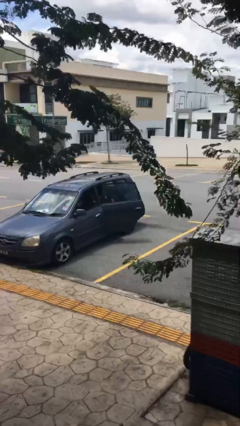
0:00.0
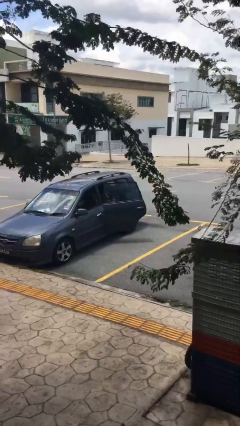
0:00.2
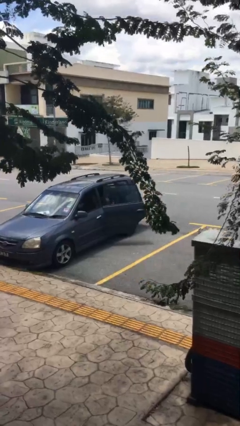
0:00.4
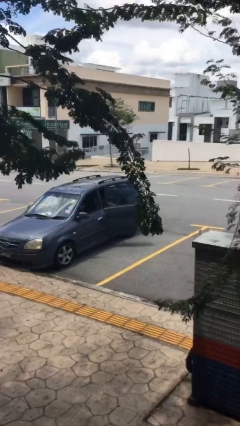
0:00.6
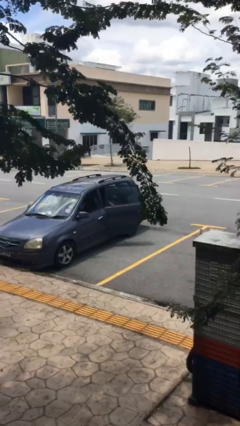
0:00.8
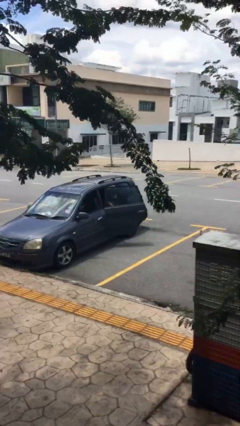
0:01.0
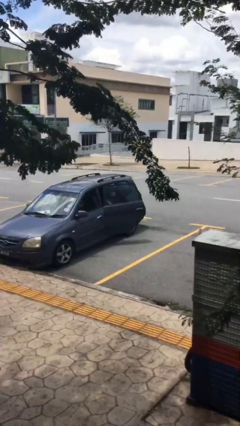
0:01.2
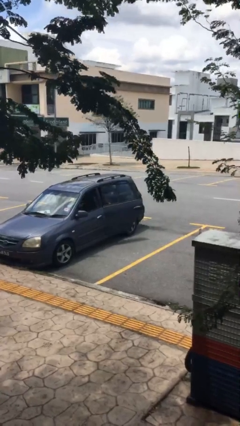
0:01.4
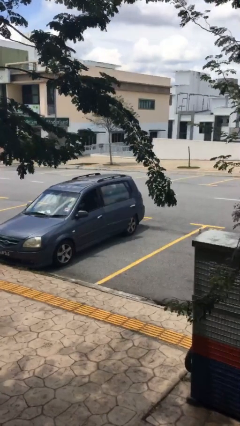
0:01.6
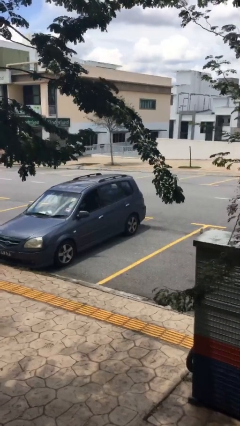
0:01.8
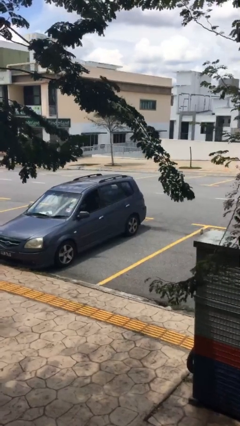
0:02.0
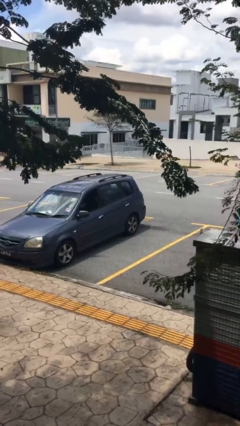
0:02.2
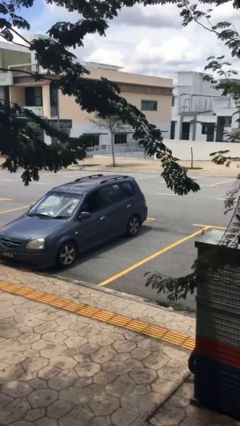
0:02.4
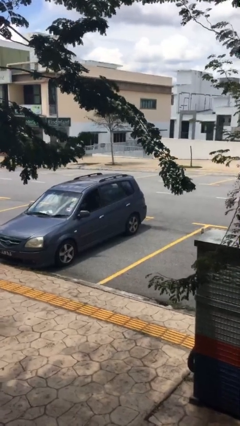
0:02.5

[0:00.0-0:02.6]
person closes car door

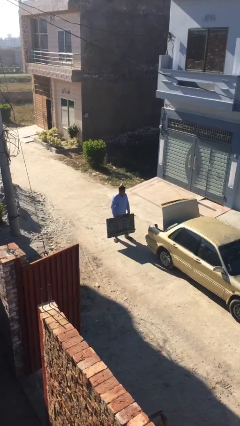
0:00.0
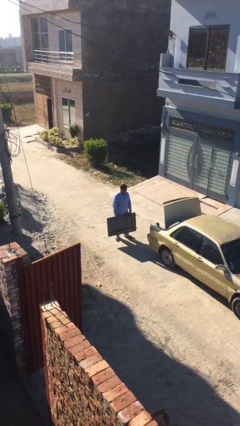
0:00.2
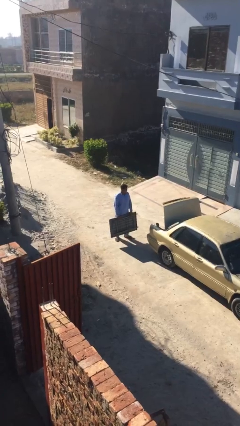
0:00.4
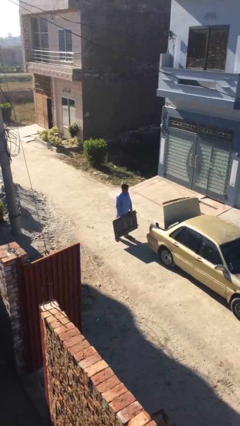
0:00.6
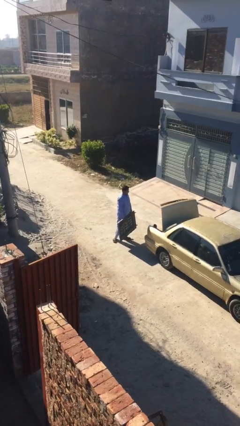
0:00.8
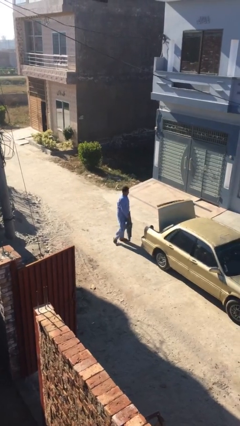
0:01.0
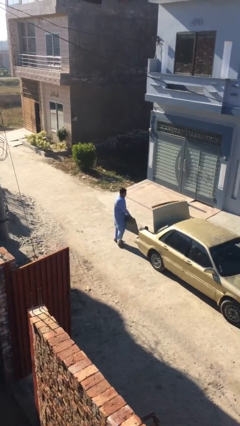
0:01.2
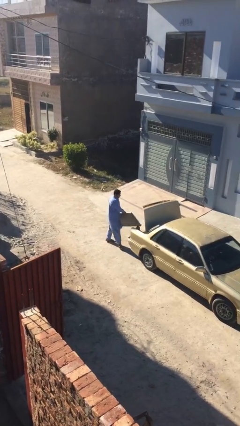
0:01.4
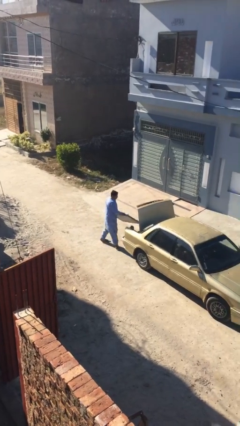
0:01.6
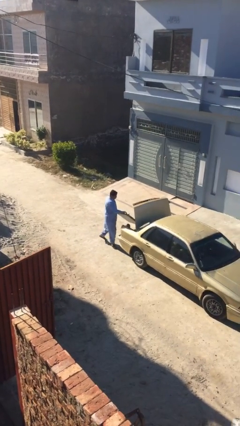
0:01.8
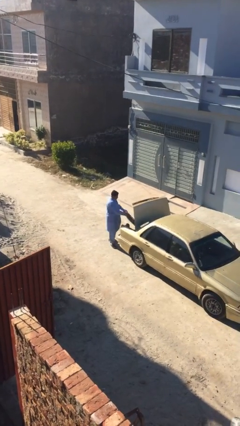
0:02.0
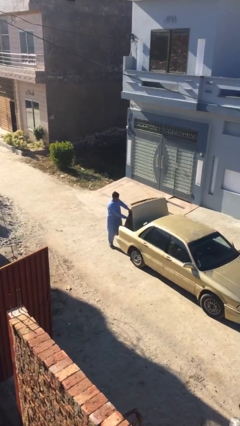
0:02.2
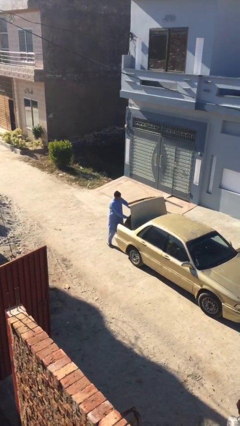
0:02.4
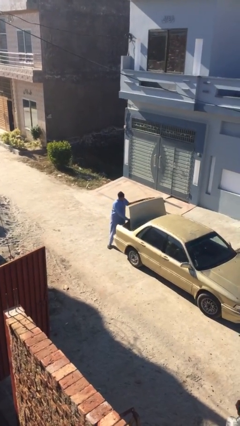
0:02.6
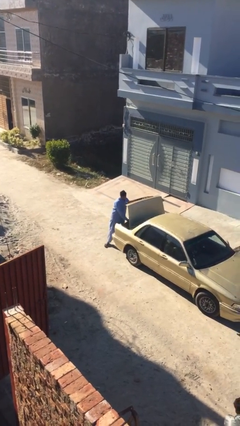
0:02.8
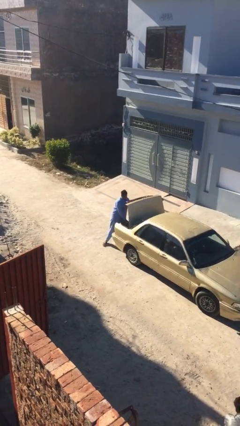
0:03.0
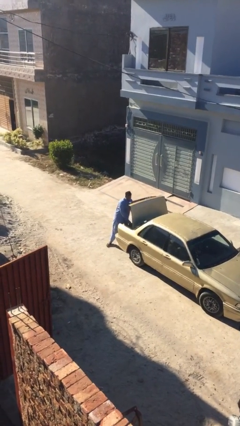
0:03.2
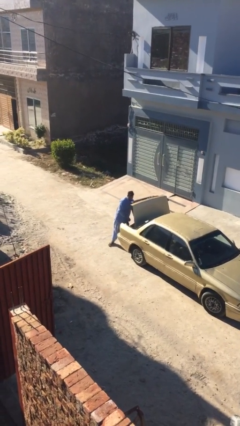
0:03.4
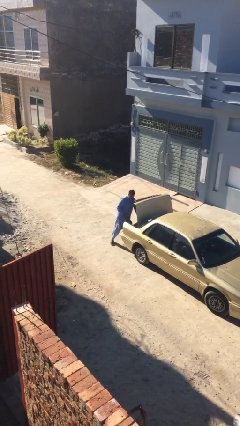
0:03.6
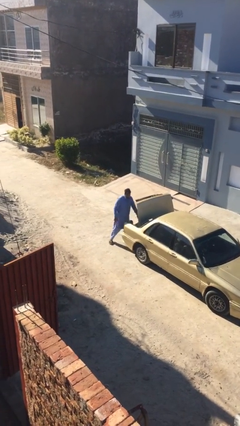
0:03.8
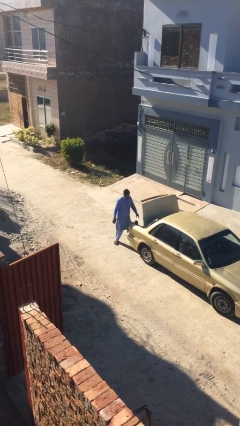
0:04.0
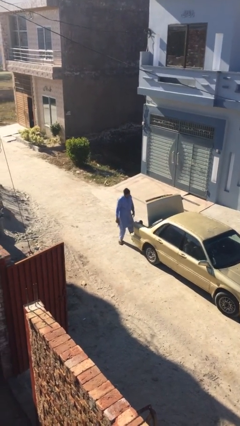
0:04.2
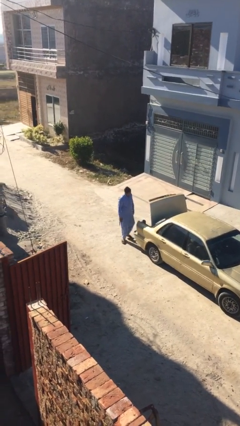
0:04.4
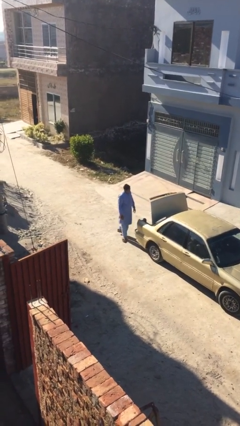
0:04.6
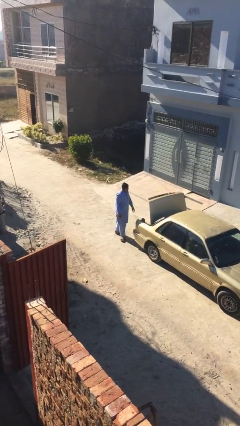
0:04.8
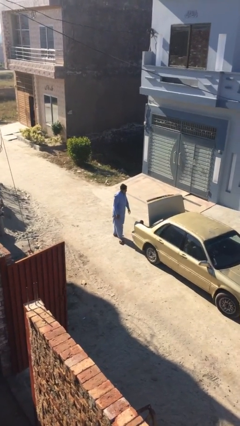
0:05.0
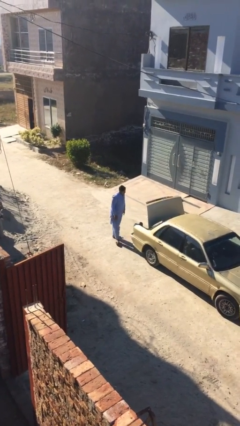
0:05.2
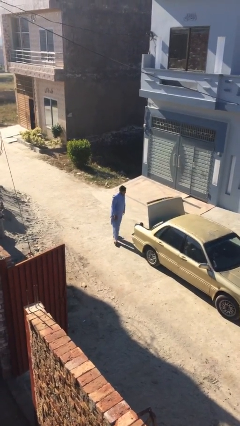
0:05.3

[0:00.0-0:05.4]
person loads car

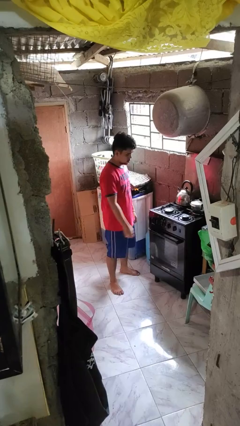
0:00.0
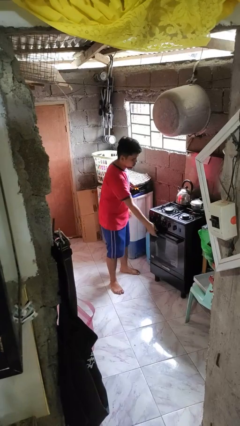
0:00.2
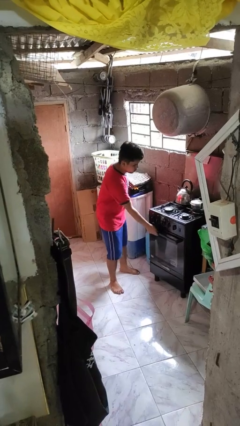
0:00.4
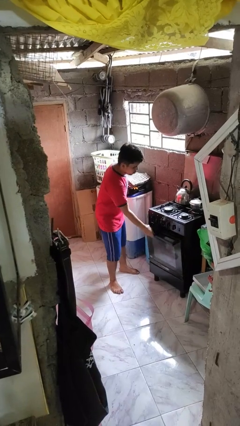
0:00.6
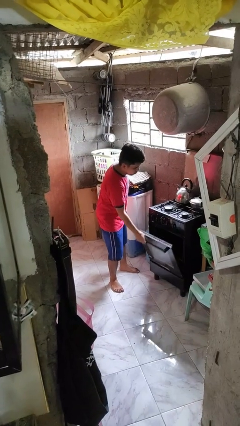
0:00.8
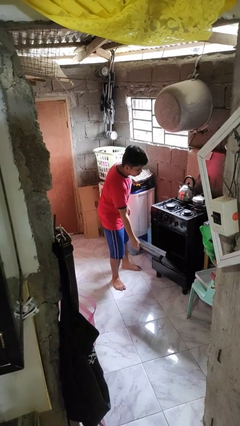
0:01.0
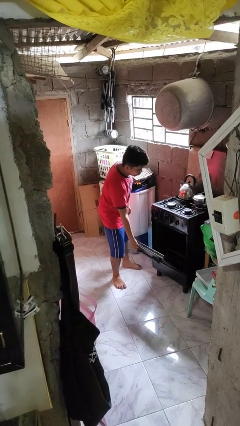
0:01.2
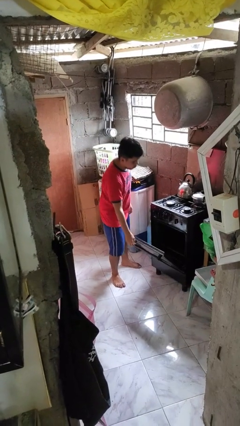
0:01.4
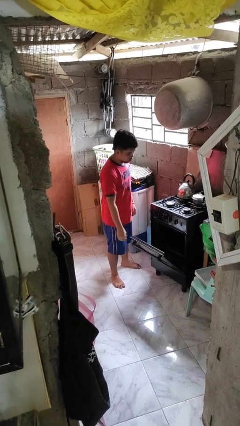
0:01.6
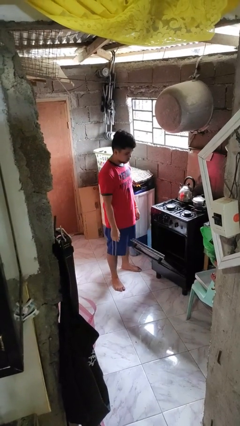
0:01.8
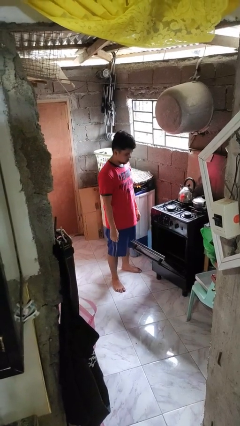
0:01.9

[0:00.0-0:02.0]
person opens oven door

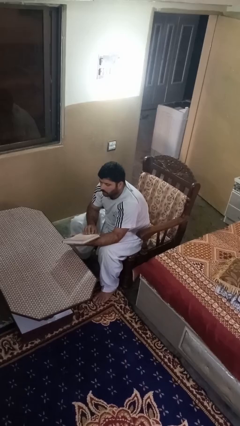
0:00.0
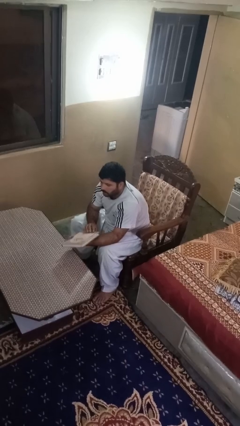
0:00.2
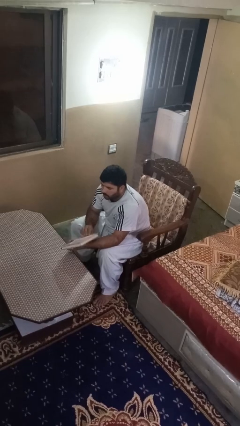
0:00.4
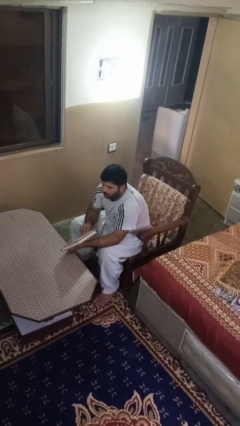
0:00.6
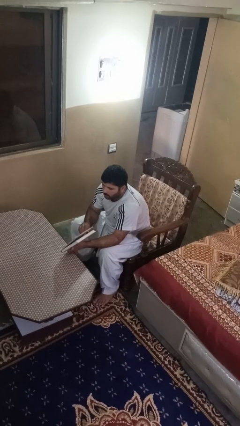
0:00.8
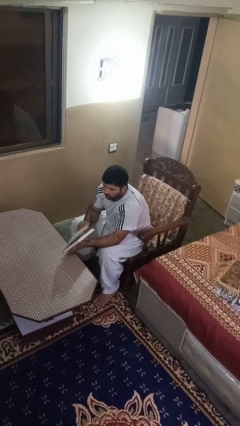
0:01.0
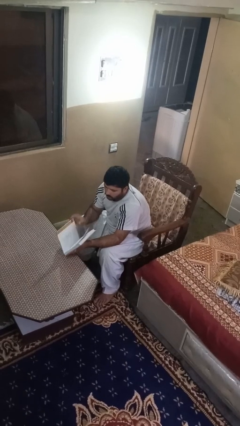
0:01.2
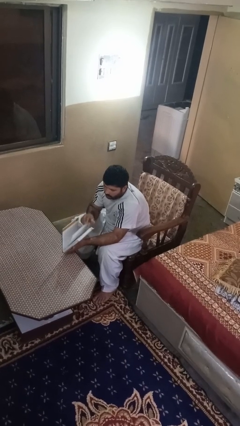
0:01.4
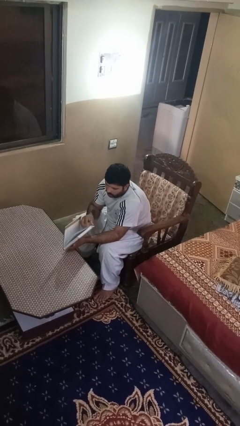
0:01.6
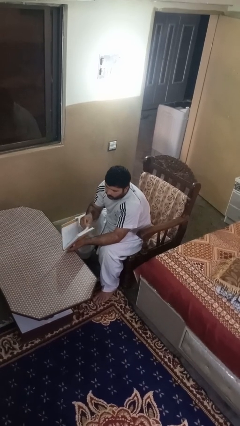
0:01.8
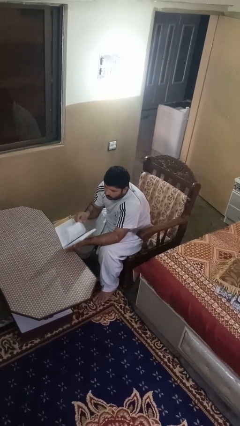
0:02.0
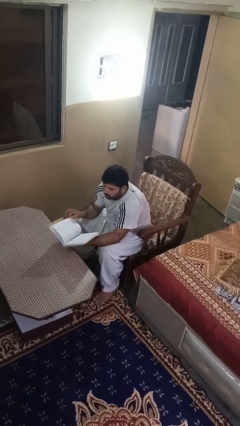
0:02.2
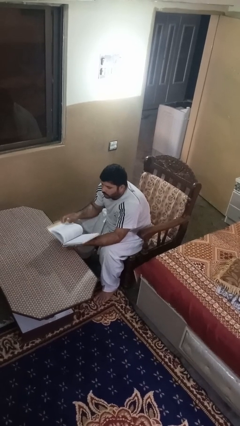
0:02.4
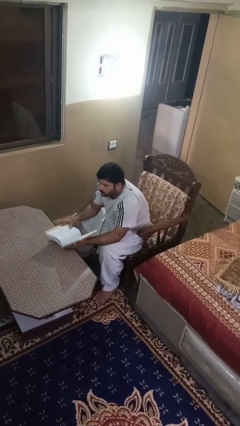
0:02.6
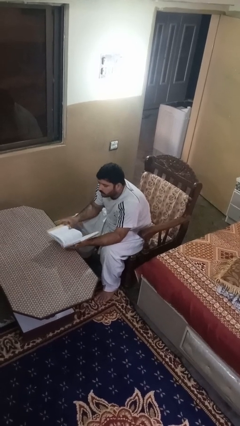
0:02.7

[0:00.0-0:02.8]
person reads book

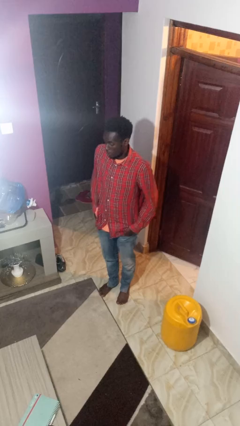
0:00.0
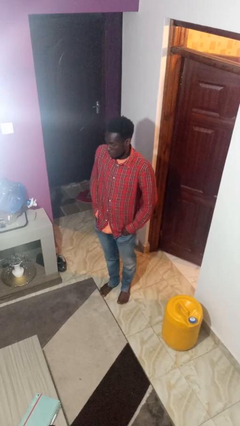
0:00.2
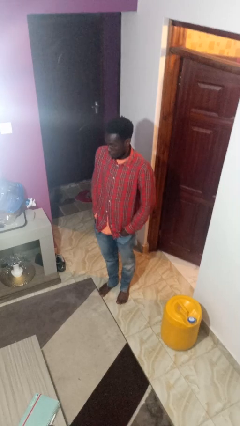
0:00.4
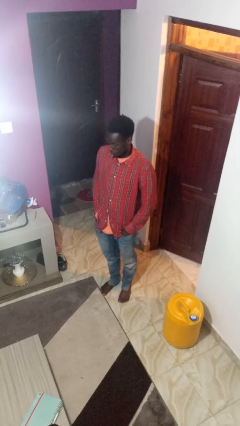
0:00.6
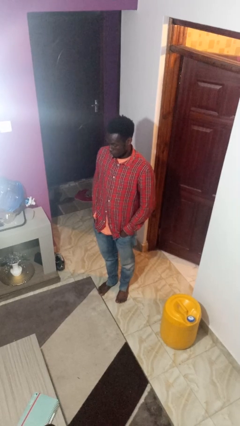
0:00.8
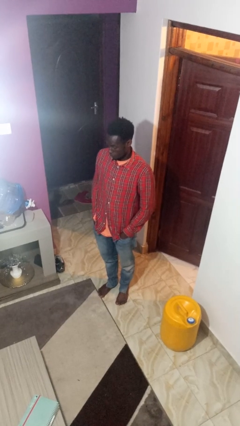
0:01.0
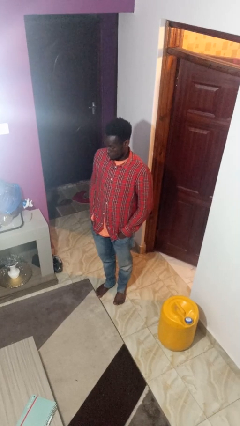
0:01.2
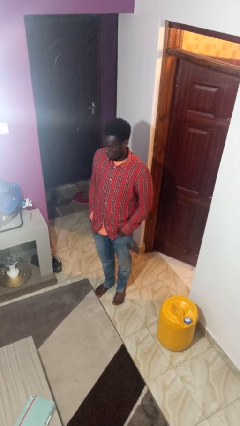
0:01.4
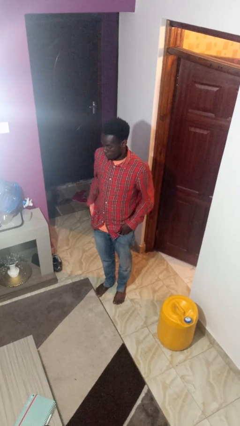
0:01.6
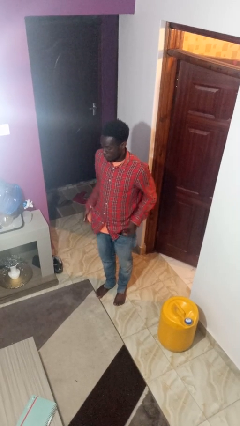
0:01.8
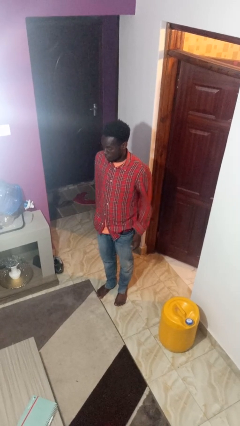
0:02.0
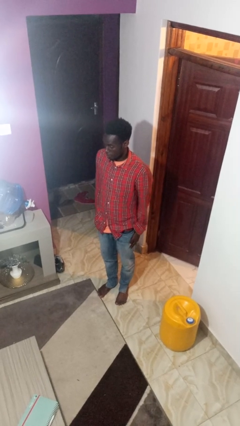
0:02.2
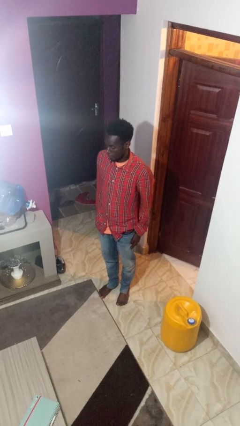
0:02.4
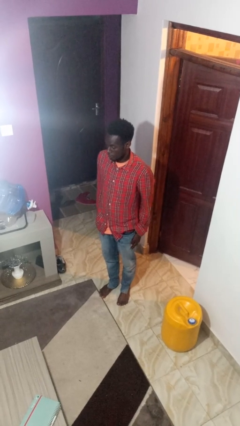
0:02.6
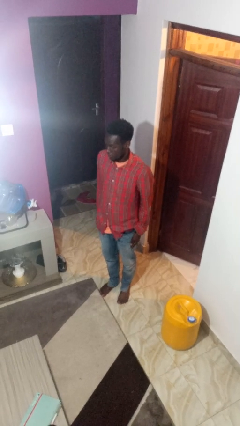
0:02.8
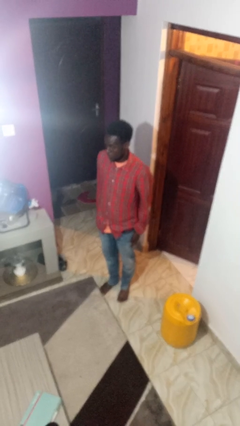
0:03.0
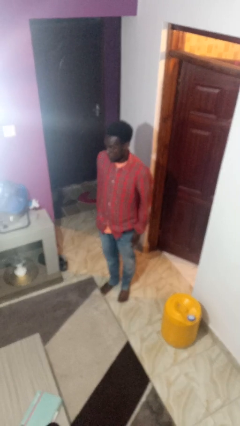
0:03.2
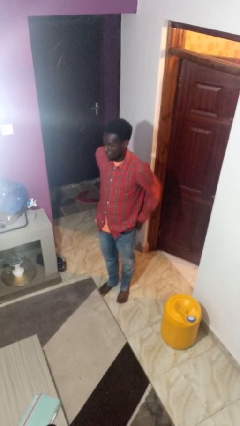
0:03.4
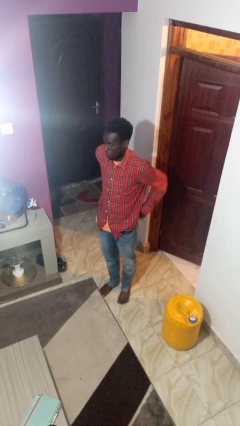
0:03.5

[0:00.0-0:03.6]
person puts hands in back pockets

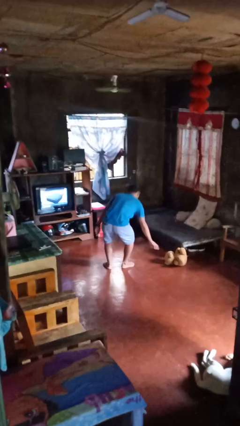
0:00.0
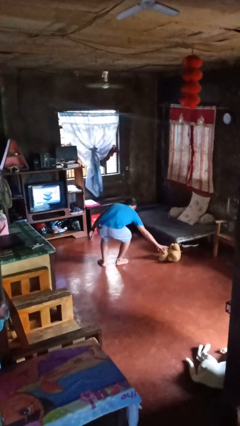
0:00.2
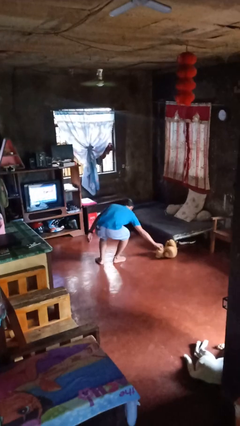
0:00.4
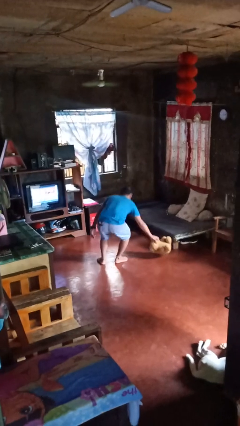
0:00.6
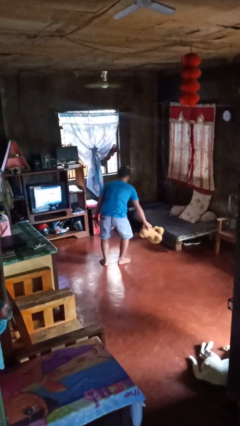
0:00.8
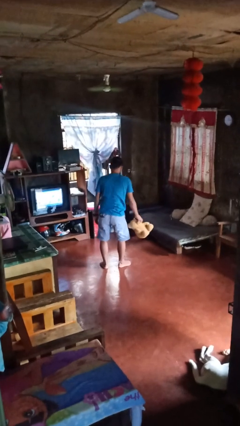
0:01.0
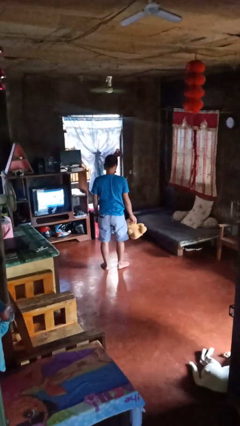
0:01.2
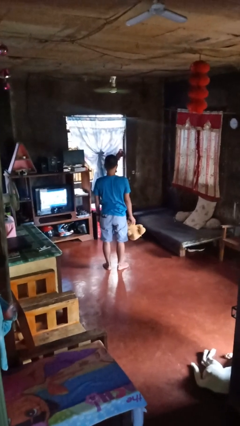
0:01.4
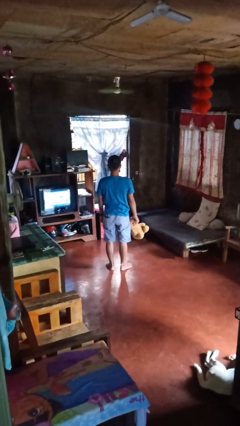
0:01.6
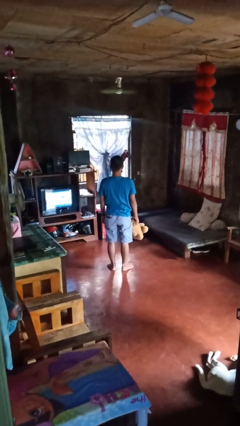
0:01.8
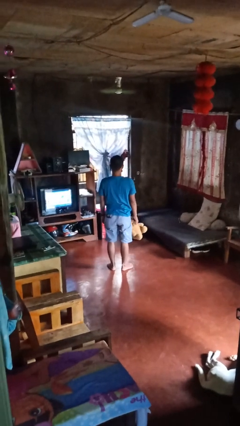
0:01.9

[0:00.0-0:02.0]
person picks up object from floor
